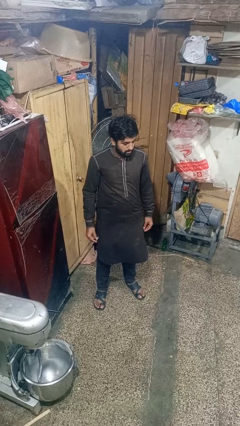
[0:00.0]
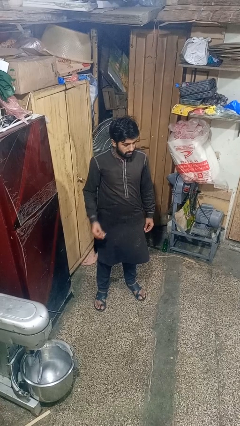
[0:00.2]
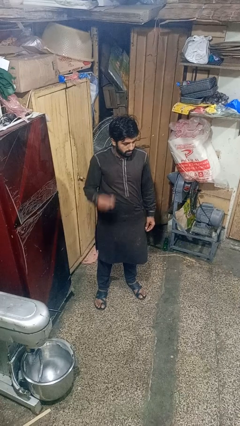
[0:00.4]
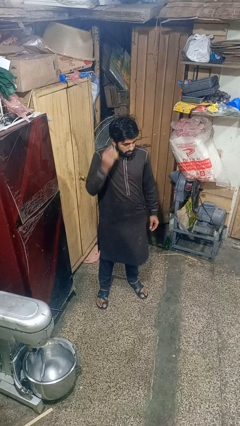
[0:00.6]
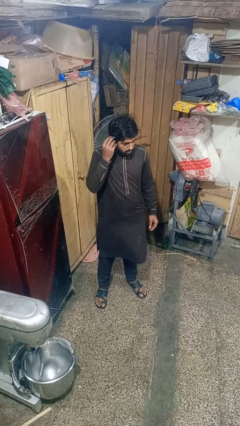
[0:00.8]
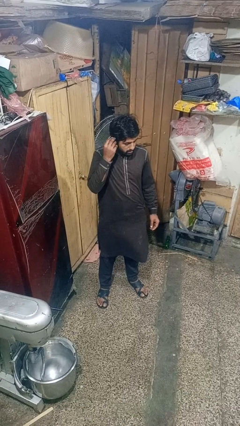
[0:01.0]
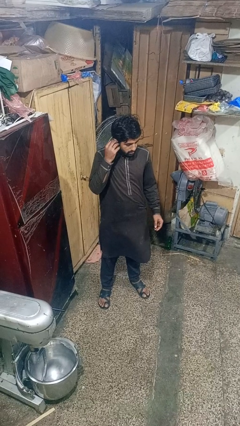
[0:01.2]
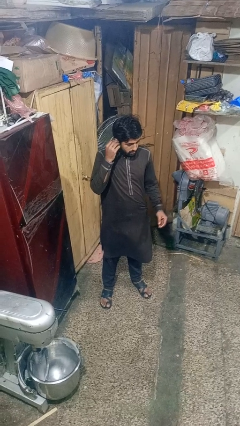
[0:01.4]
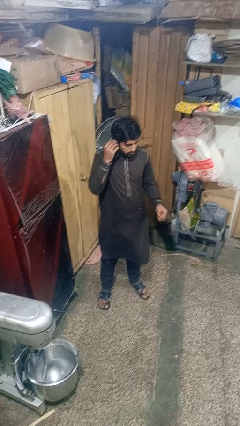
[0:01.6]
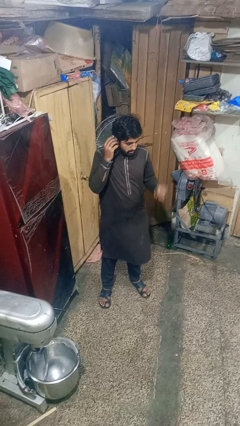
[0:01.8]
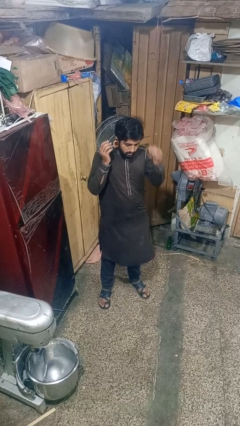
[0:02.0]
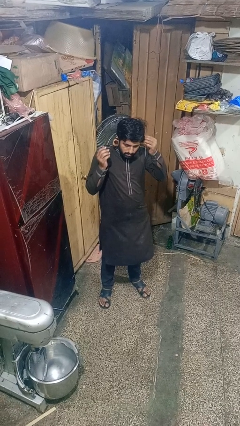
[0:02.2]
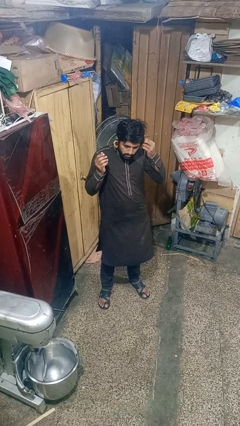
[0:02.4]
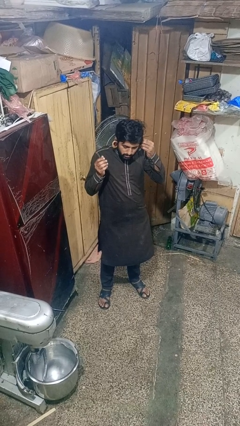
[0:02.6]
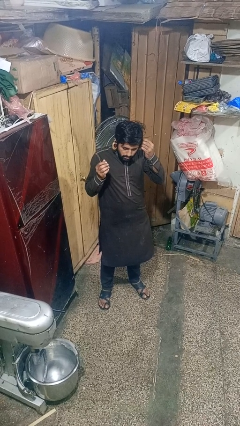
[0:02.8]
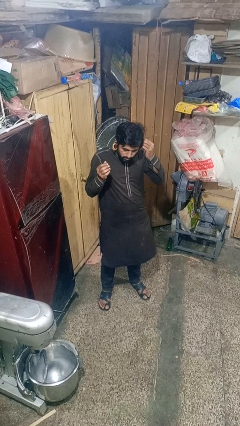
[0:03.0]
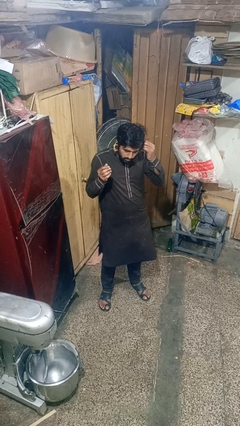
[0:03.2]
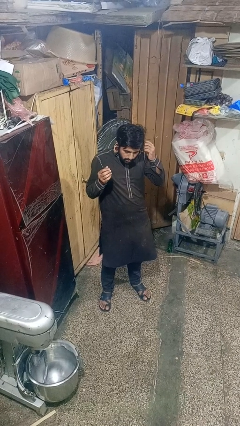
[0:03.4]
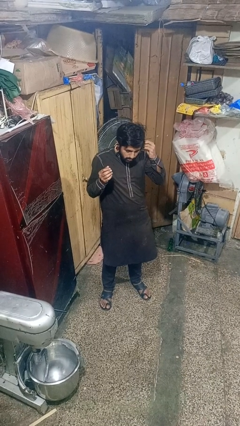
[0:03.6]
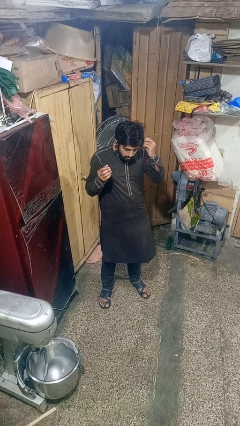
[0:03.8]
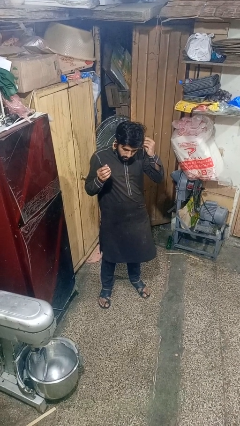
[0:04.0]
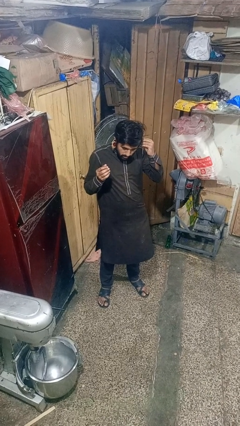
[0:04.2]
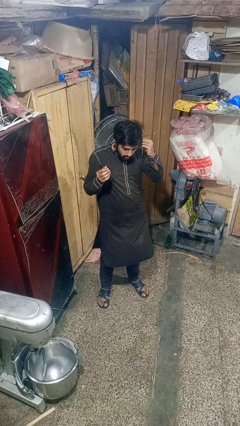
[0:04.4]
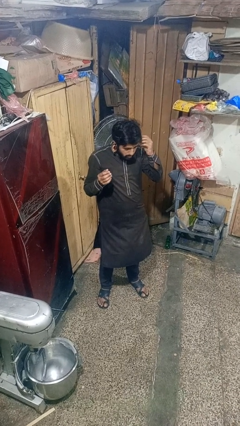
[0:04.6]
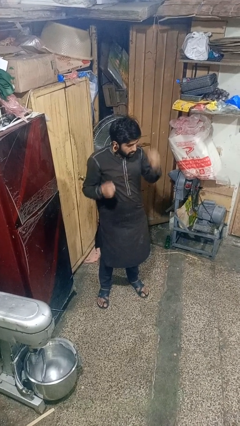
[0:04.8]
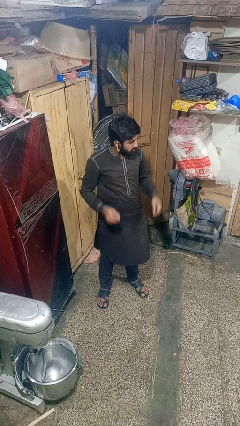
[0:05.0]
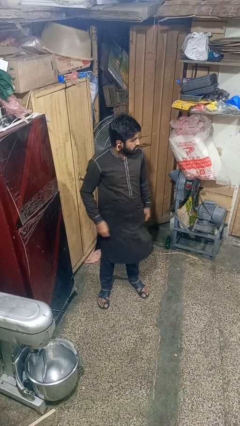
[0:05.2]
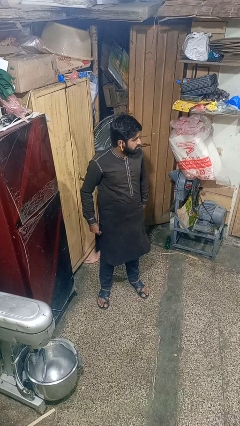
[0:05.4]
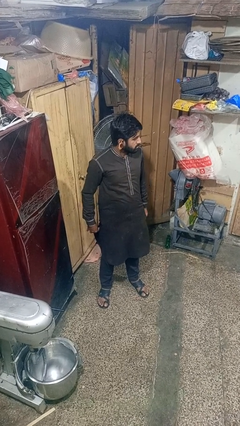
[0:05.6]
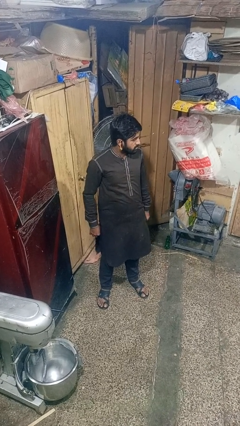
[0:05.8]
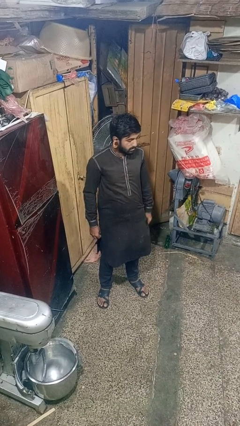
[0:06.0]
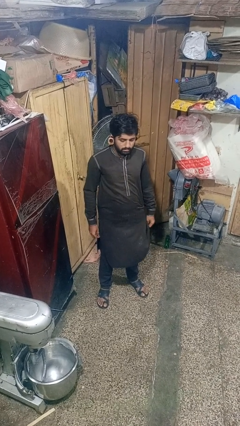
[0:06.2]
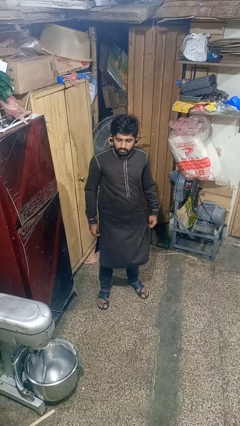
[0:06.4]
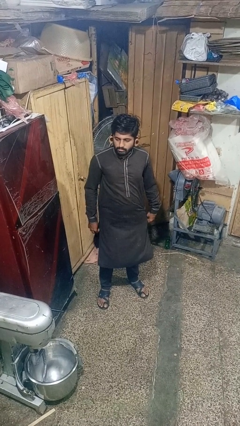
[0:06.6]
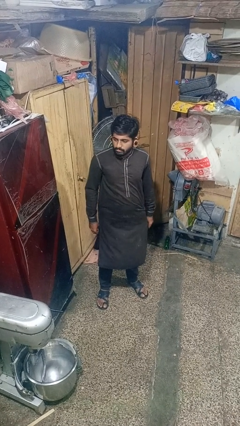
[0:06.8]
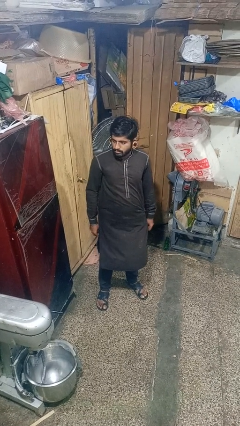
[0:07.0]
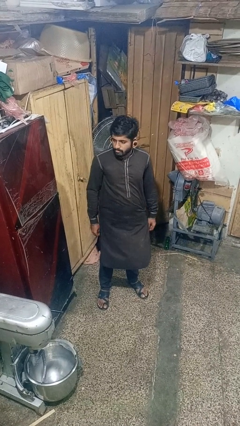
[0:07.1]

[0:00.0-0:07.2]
person puts on earrings

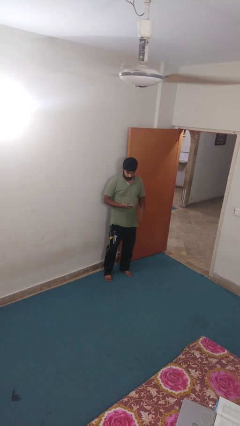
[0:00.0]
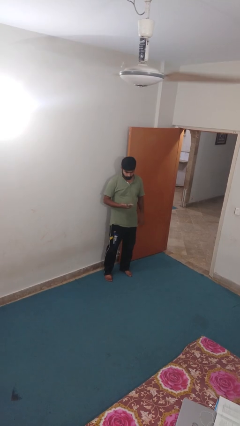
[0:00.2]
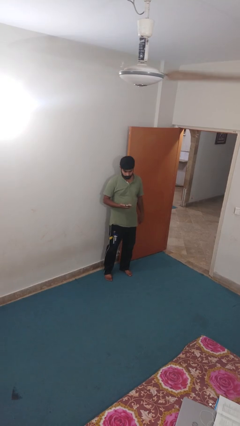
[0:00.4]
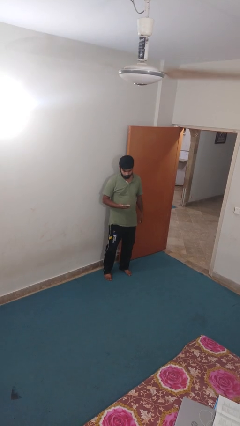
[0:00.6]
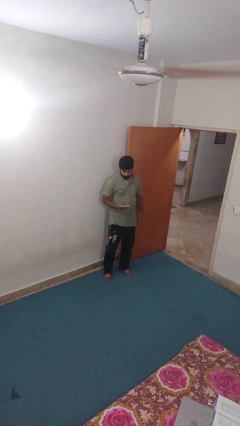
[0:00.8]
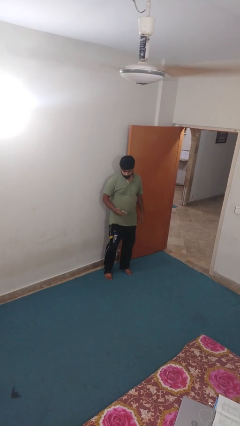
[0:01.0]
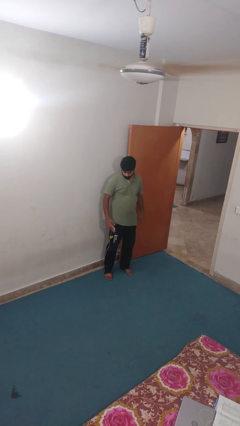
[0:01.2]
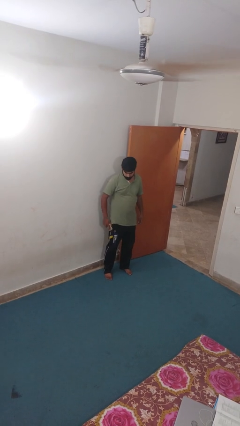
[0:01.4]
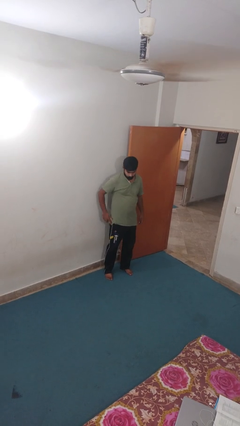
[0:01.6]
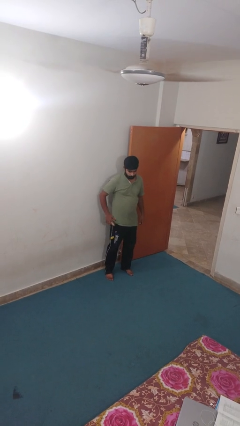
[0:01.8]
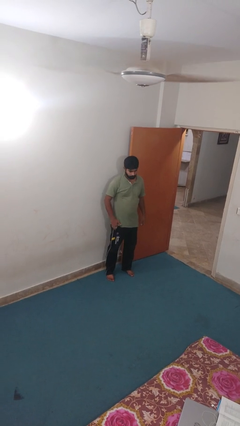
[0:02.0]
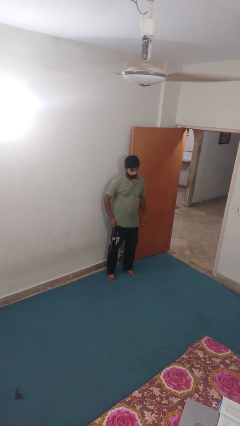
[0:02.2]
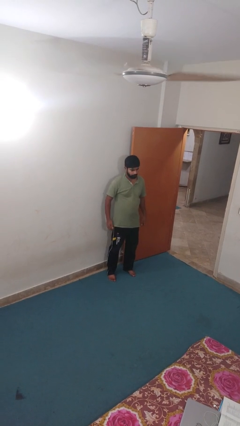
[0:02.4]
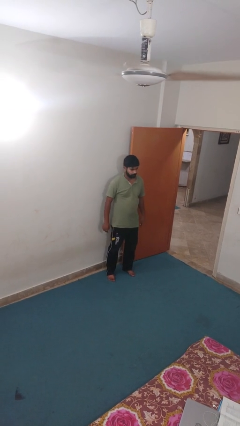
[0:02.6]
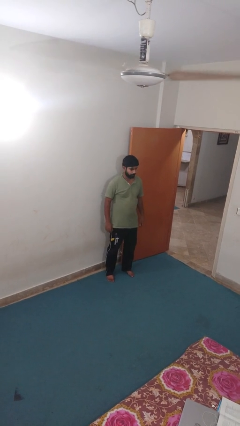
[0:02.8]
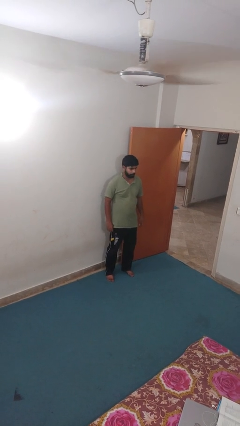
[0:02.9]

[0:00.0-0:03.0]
person puts phone into pocket

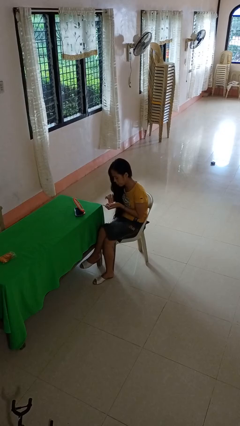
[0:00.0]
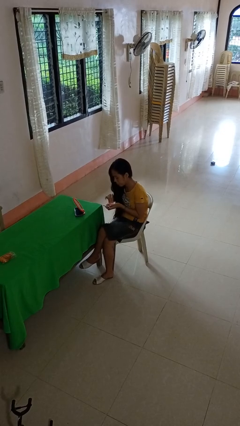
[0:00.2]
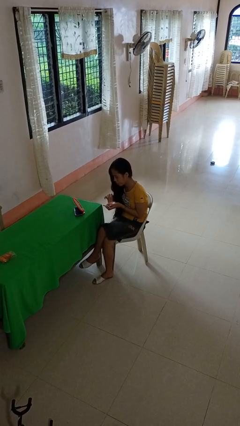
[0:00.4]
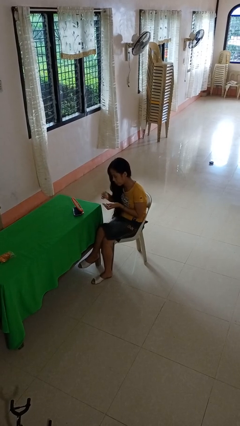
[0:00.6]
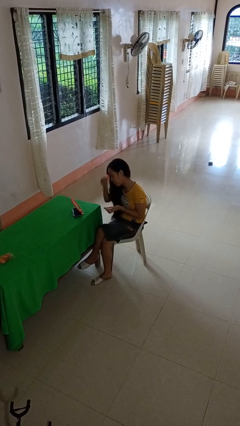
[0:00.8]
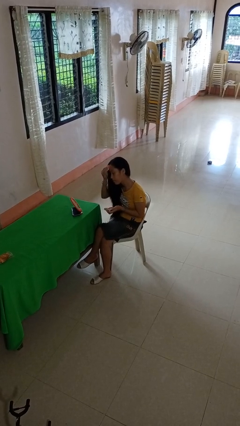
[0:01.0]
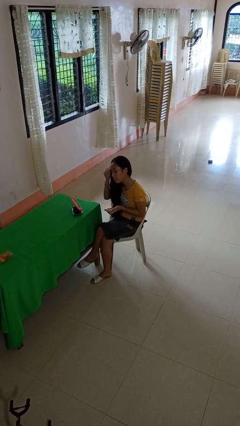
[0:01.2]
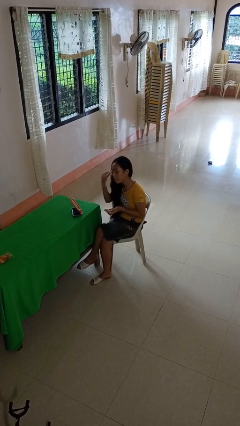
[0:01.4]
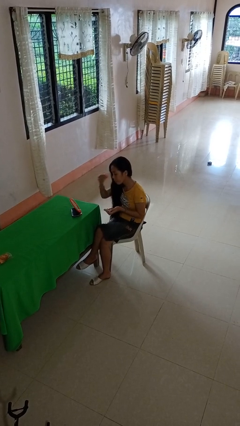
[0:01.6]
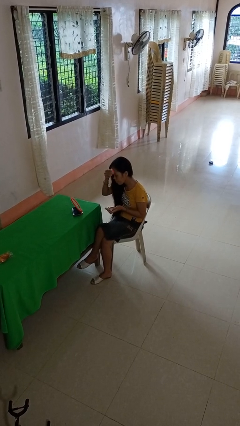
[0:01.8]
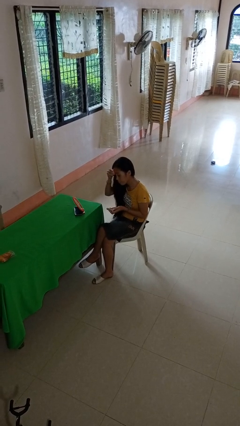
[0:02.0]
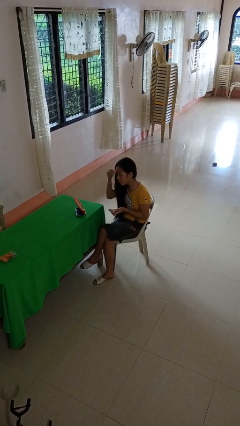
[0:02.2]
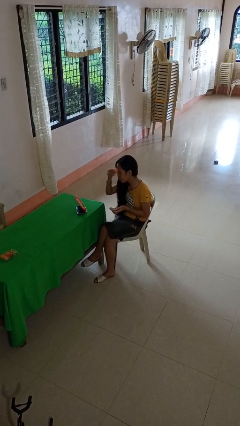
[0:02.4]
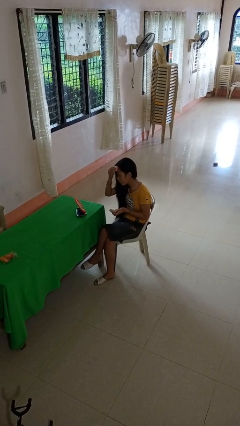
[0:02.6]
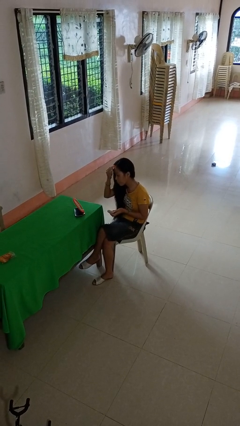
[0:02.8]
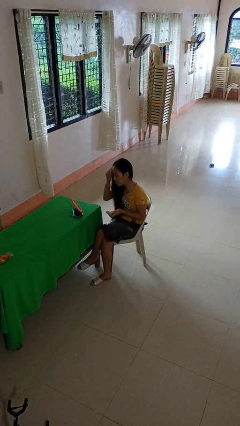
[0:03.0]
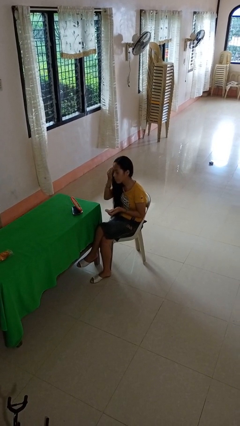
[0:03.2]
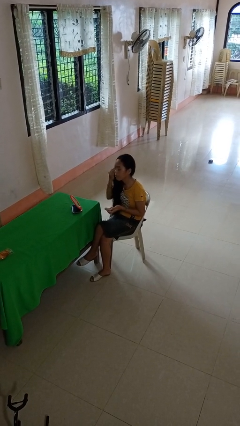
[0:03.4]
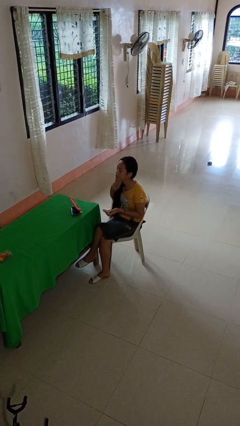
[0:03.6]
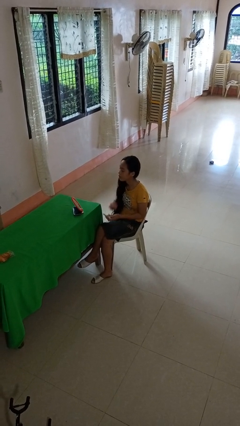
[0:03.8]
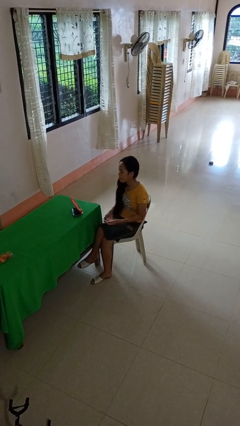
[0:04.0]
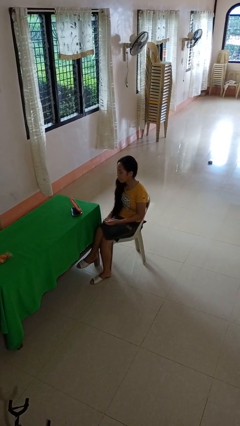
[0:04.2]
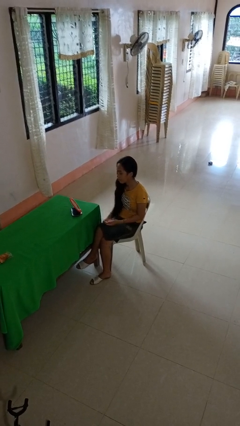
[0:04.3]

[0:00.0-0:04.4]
person applies foundation makeup

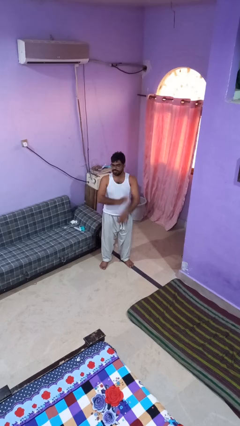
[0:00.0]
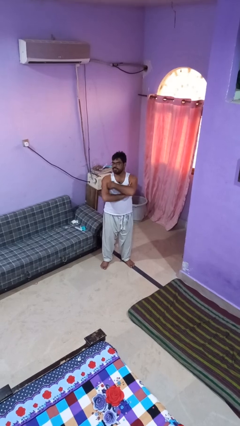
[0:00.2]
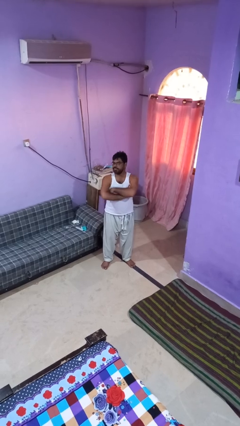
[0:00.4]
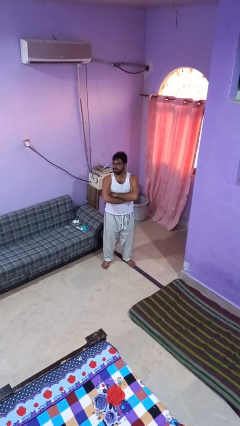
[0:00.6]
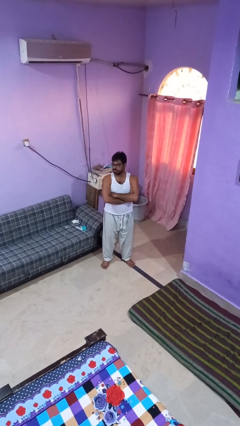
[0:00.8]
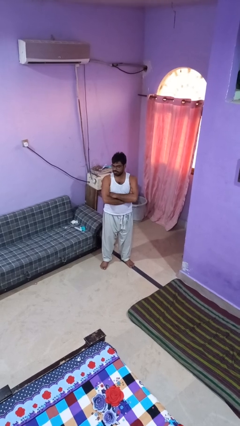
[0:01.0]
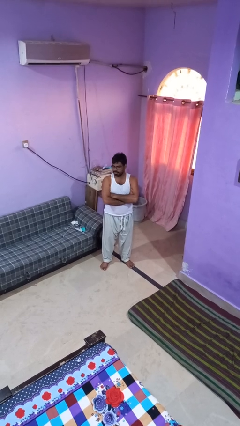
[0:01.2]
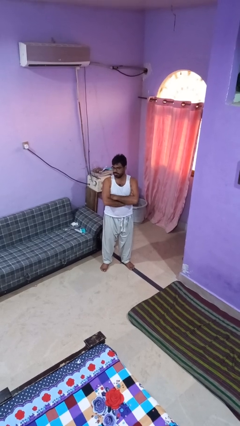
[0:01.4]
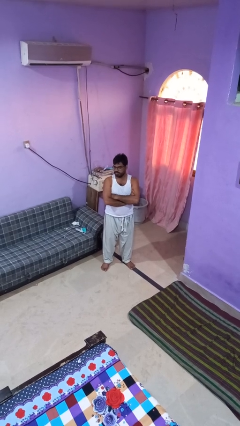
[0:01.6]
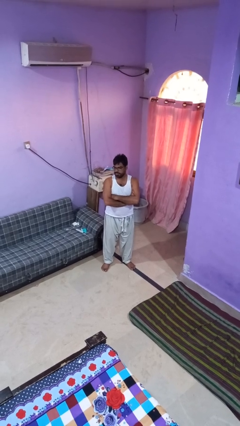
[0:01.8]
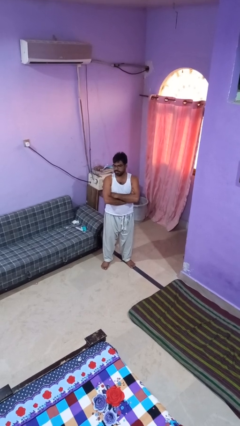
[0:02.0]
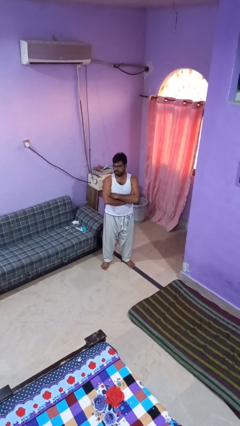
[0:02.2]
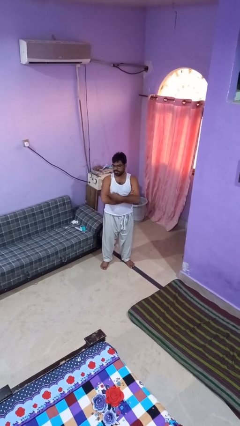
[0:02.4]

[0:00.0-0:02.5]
person crosses arms

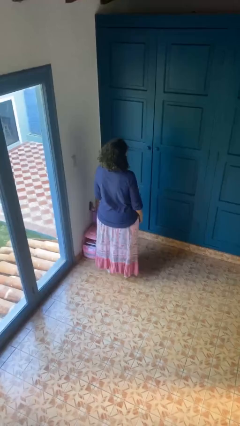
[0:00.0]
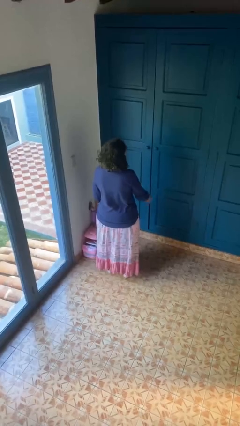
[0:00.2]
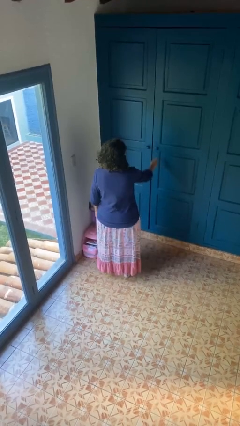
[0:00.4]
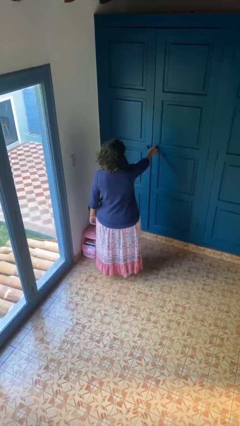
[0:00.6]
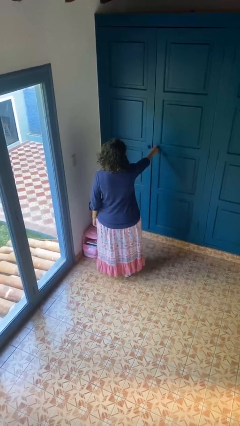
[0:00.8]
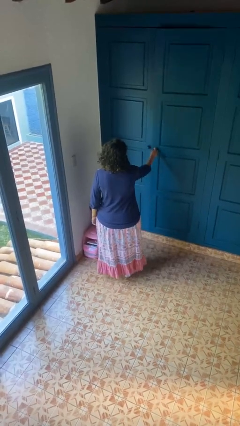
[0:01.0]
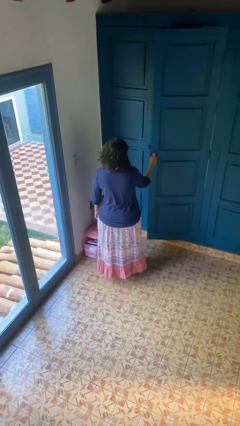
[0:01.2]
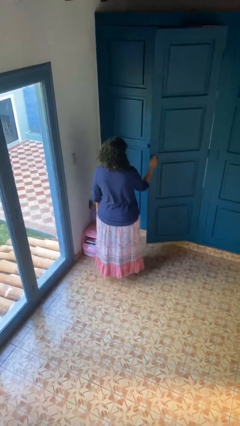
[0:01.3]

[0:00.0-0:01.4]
person opens closet door
